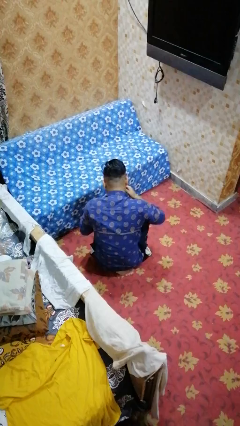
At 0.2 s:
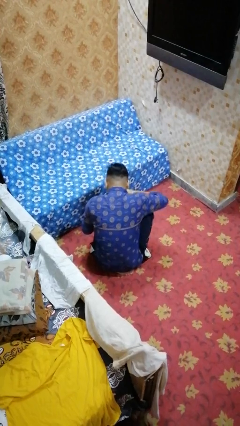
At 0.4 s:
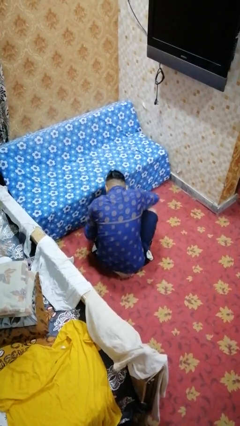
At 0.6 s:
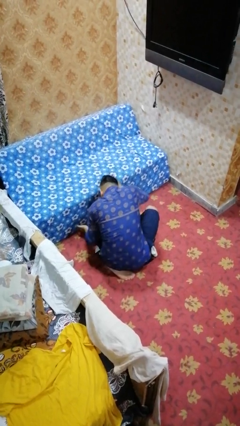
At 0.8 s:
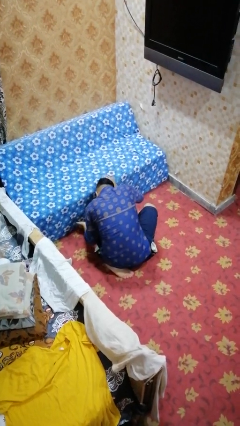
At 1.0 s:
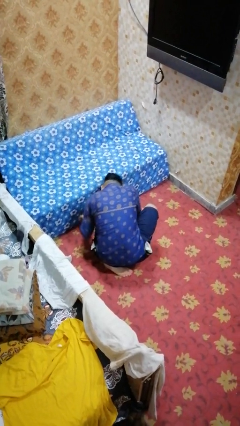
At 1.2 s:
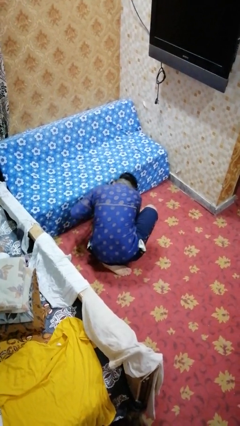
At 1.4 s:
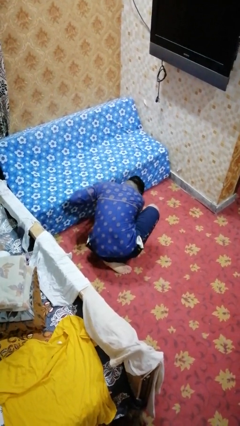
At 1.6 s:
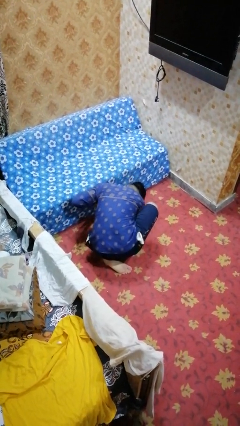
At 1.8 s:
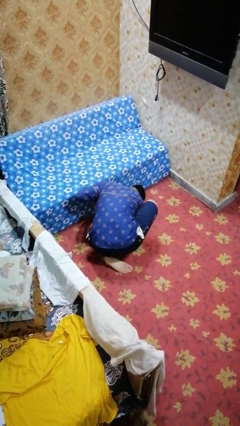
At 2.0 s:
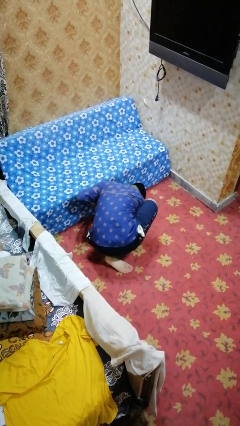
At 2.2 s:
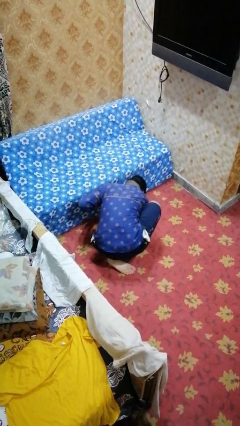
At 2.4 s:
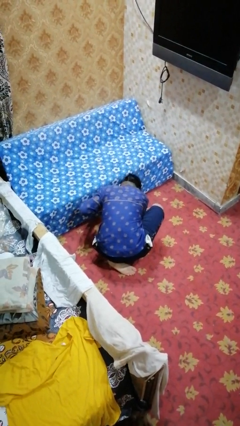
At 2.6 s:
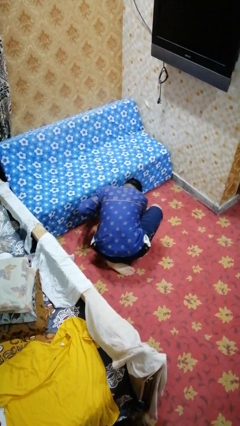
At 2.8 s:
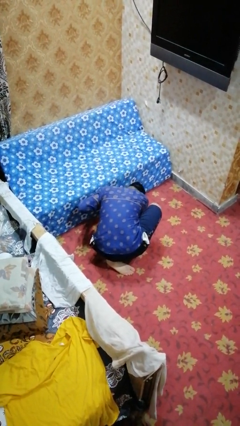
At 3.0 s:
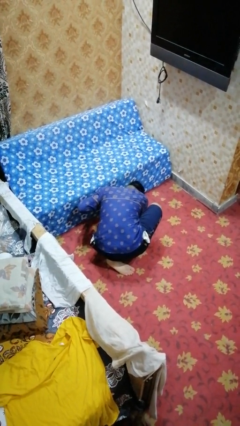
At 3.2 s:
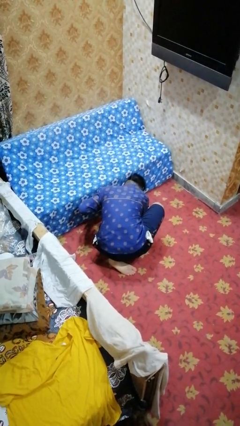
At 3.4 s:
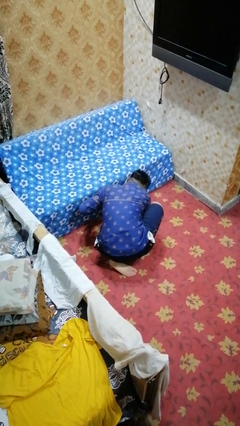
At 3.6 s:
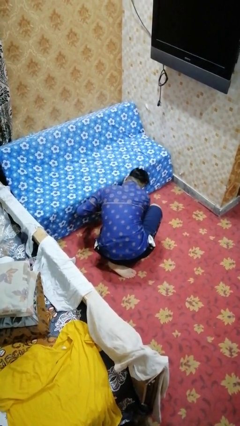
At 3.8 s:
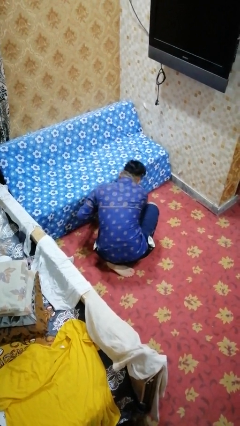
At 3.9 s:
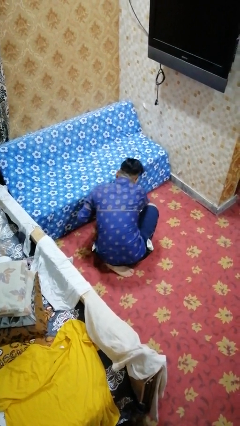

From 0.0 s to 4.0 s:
person searches under couch

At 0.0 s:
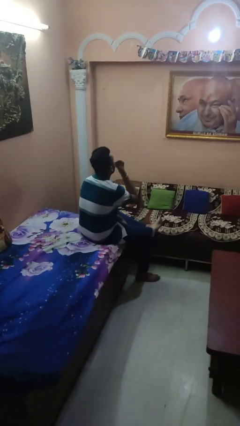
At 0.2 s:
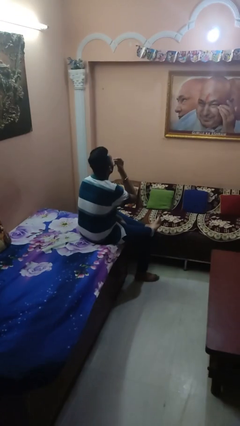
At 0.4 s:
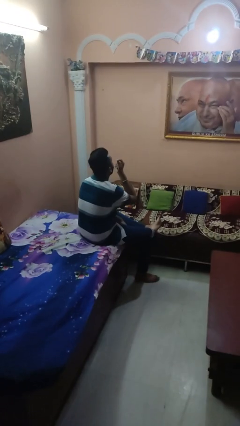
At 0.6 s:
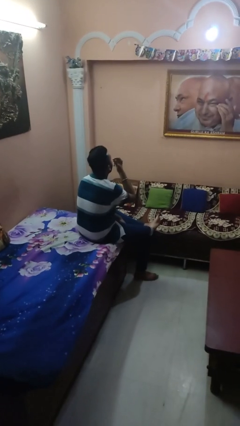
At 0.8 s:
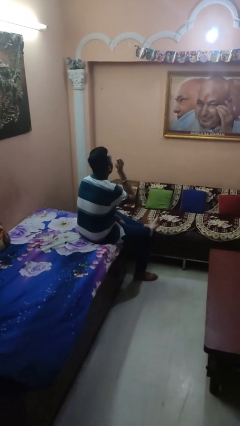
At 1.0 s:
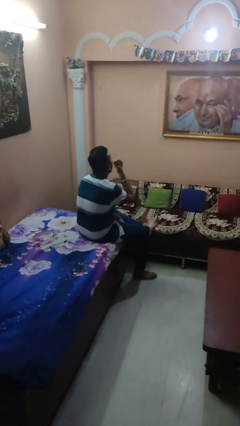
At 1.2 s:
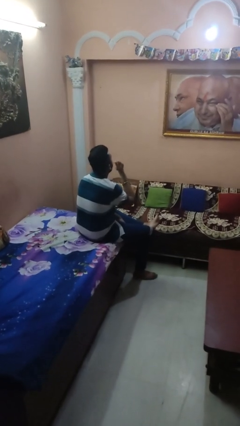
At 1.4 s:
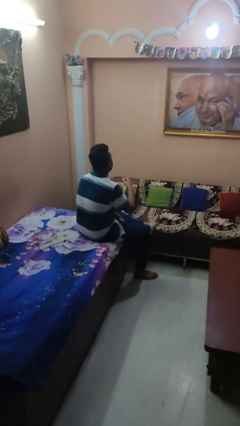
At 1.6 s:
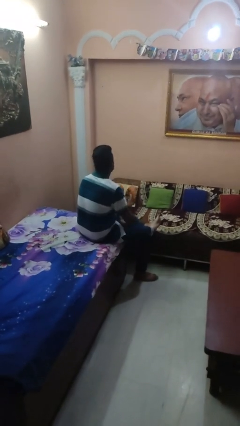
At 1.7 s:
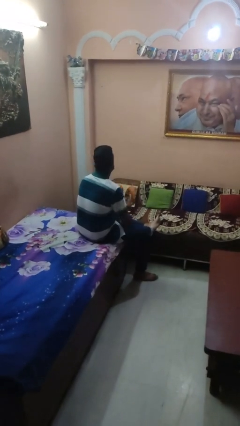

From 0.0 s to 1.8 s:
person yawns

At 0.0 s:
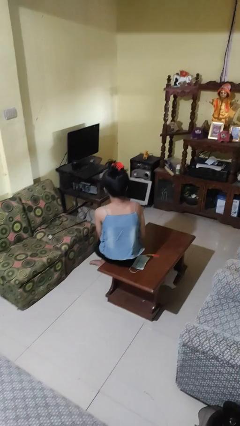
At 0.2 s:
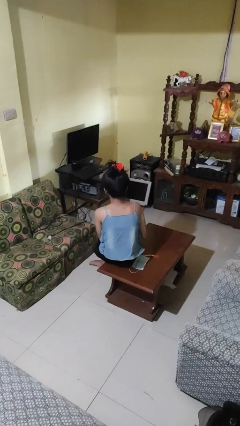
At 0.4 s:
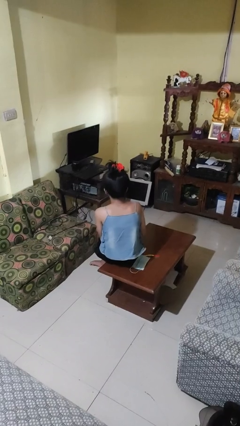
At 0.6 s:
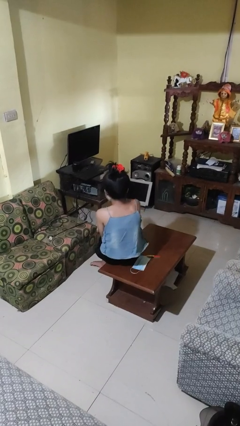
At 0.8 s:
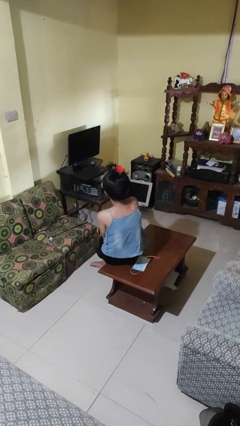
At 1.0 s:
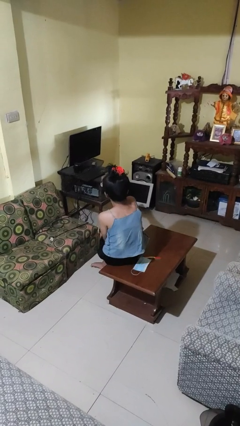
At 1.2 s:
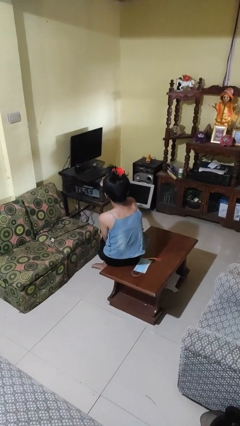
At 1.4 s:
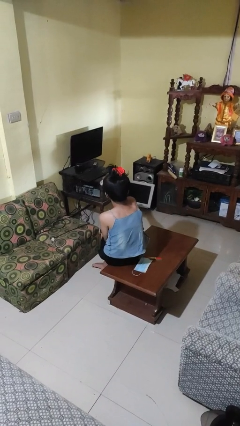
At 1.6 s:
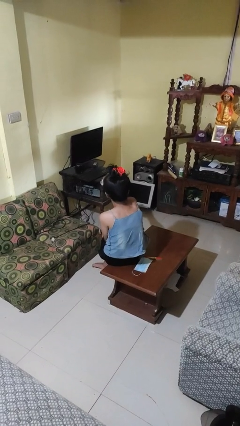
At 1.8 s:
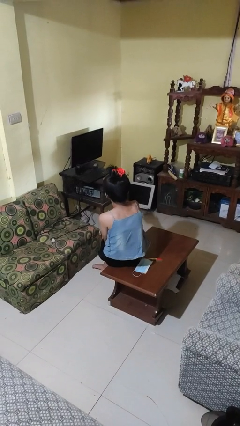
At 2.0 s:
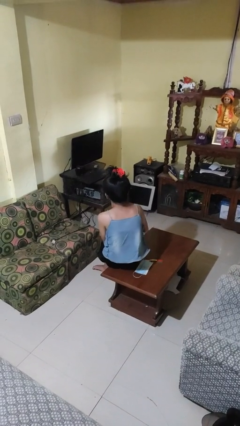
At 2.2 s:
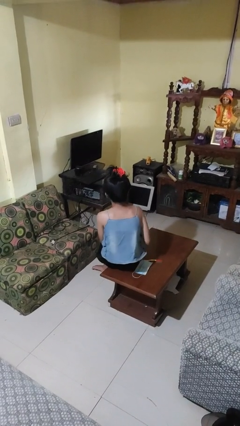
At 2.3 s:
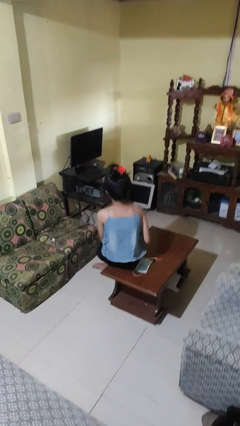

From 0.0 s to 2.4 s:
person uses television remote

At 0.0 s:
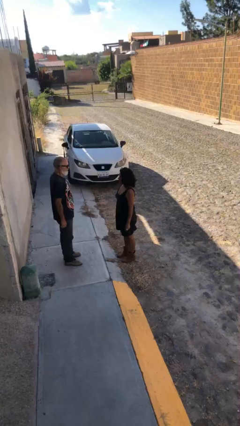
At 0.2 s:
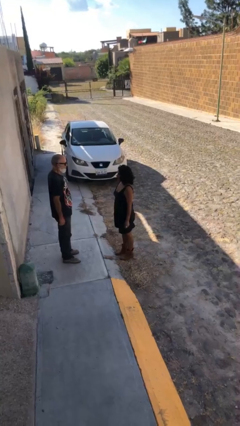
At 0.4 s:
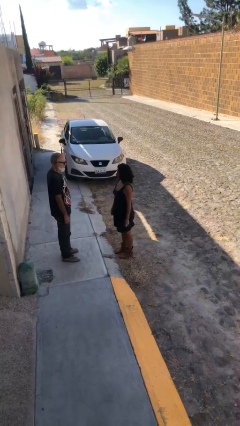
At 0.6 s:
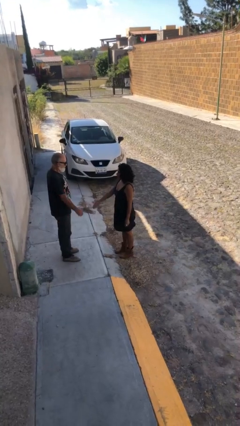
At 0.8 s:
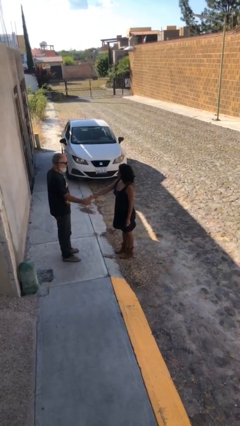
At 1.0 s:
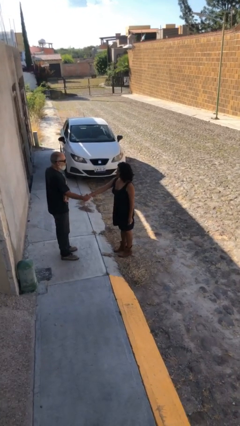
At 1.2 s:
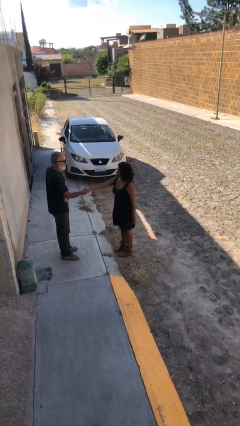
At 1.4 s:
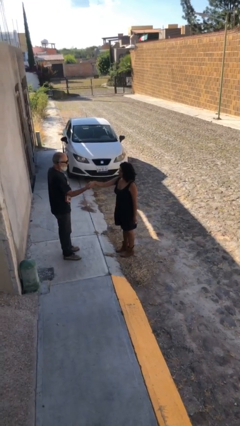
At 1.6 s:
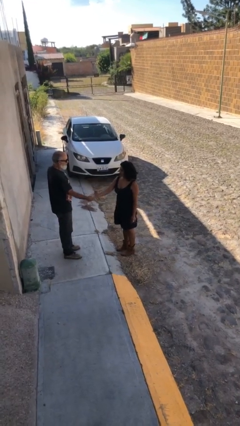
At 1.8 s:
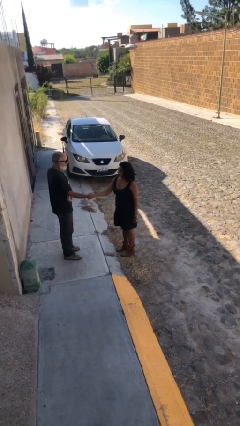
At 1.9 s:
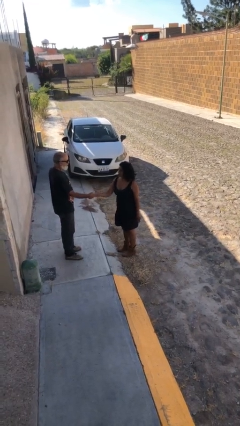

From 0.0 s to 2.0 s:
person shakes hand

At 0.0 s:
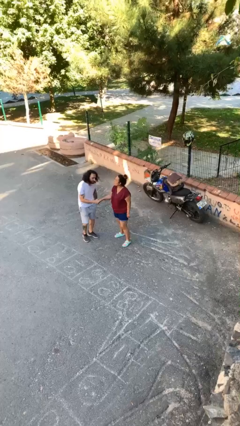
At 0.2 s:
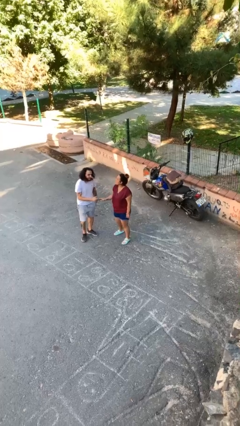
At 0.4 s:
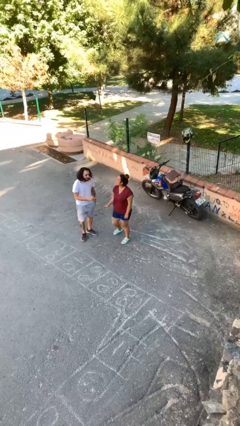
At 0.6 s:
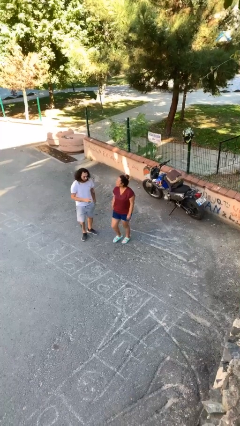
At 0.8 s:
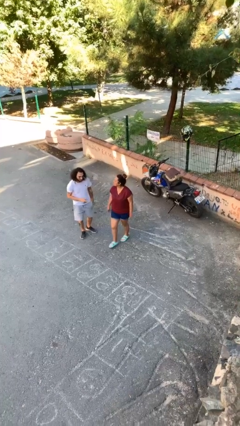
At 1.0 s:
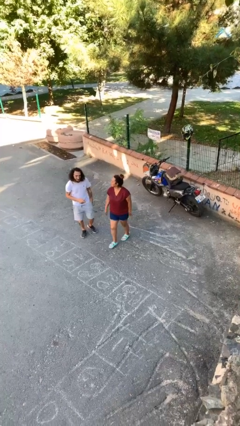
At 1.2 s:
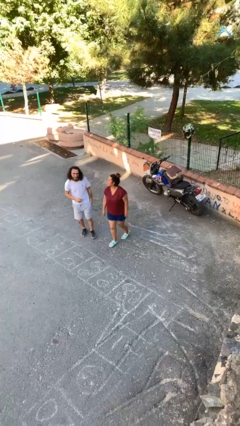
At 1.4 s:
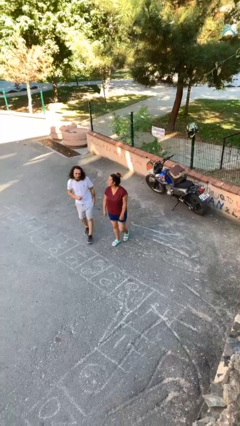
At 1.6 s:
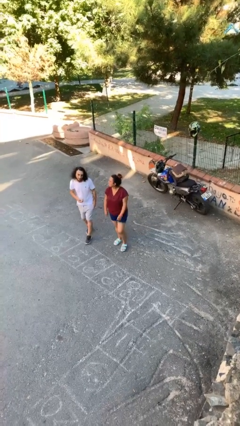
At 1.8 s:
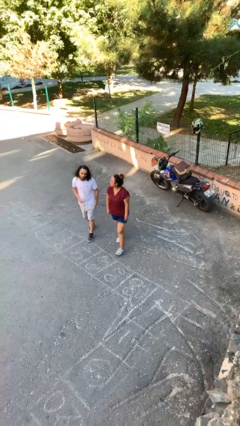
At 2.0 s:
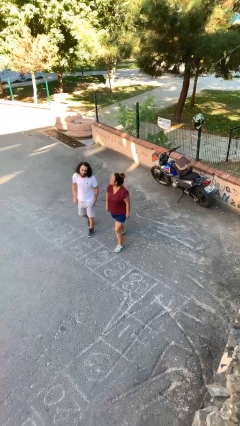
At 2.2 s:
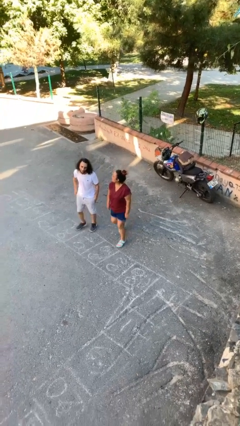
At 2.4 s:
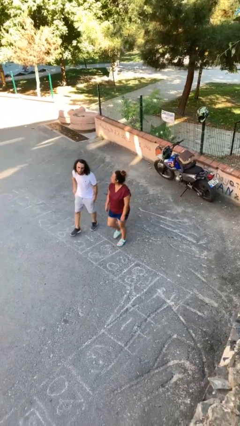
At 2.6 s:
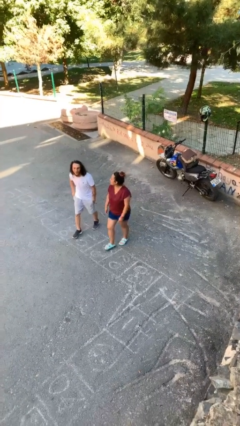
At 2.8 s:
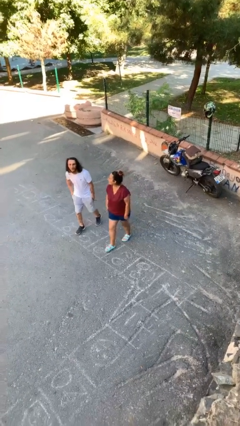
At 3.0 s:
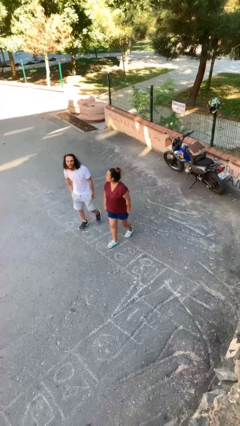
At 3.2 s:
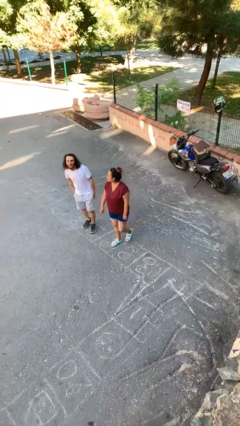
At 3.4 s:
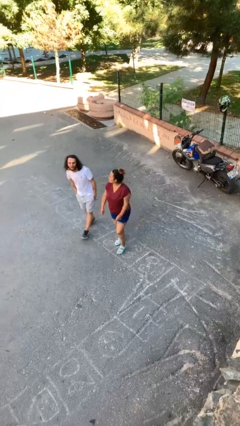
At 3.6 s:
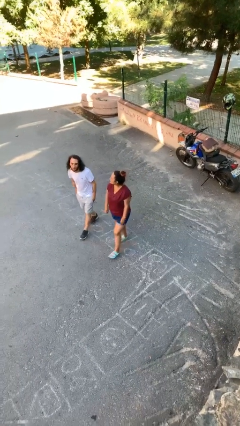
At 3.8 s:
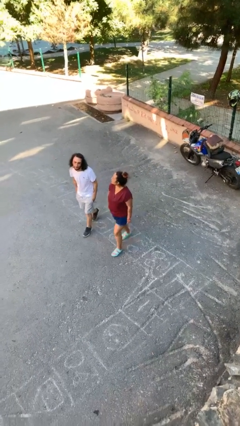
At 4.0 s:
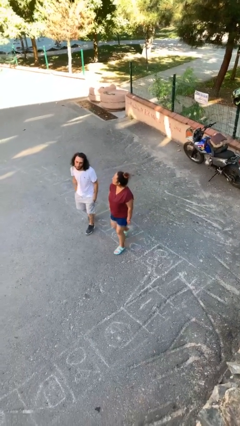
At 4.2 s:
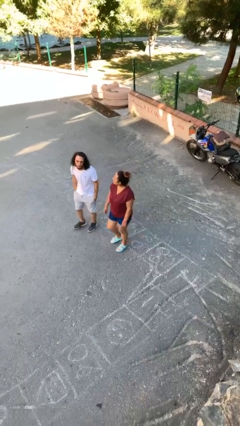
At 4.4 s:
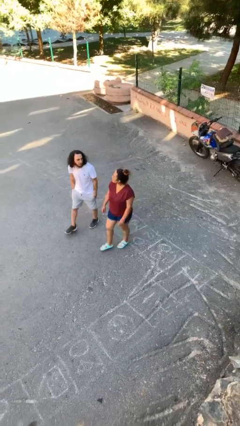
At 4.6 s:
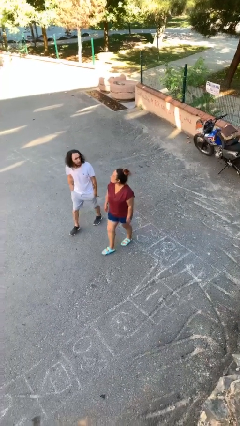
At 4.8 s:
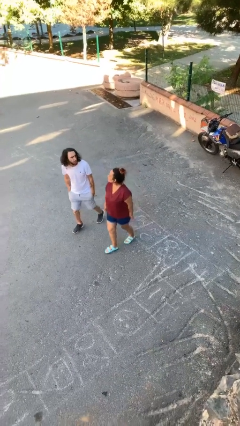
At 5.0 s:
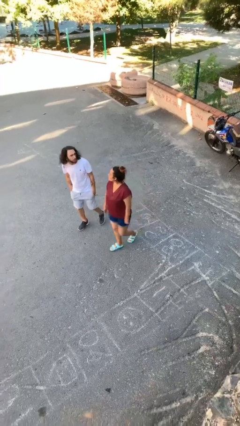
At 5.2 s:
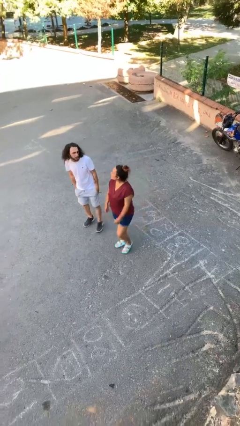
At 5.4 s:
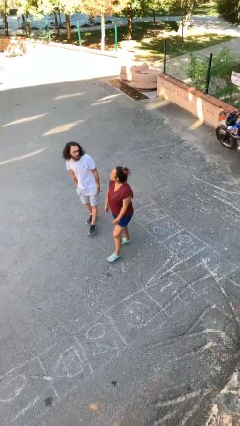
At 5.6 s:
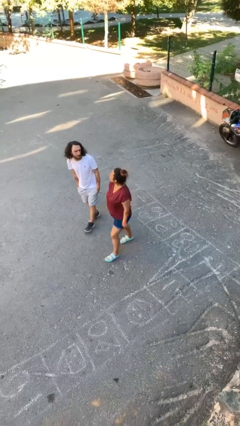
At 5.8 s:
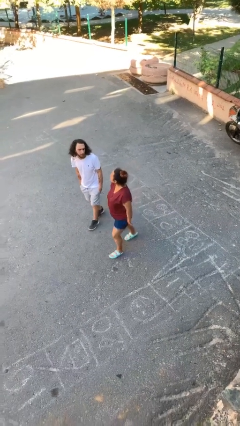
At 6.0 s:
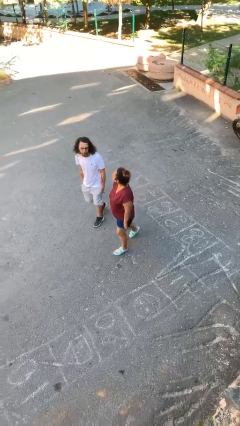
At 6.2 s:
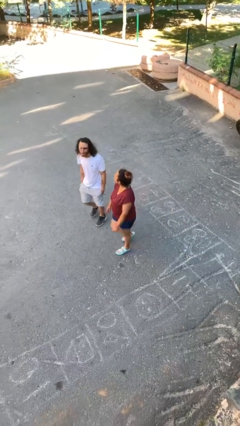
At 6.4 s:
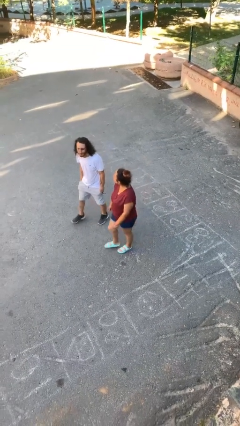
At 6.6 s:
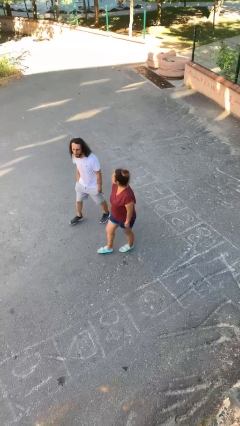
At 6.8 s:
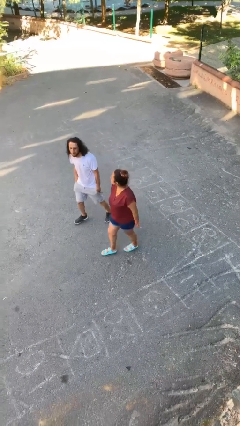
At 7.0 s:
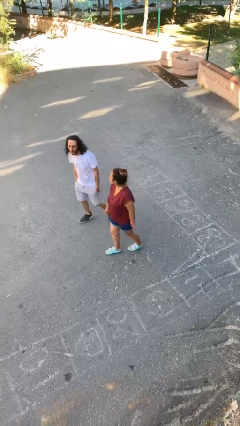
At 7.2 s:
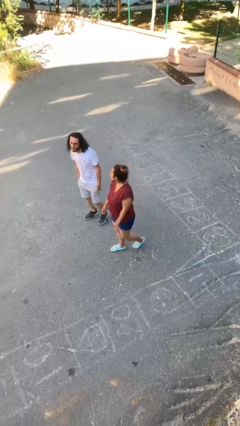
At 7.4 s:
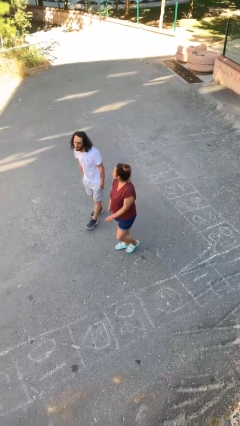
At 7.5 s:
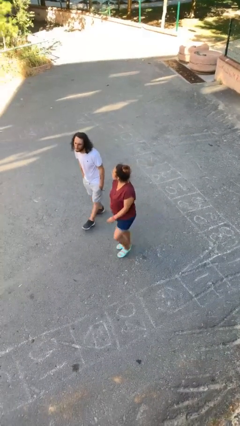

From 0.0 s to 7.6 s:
person talks to person
